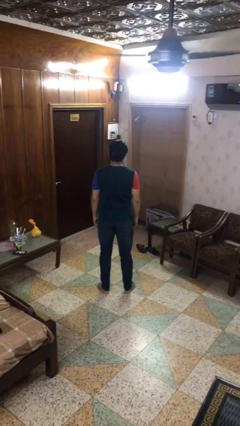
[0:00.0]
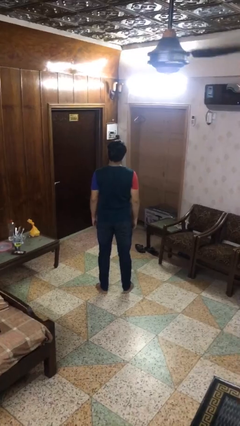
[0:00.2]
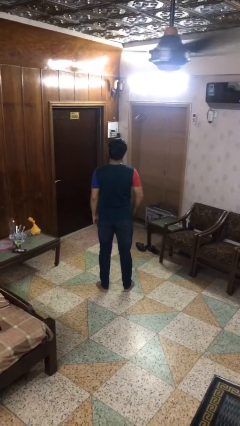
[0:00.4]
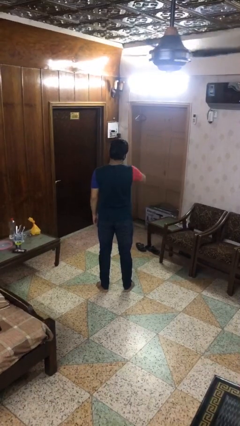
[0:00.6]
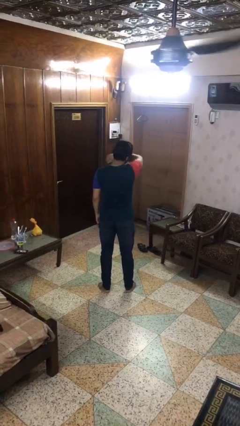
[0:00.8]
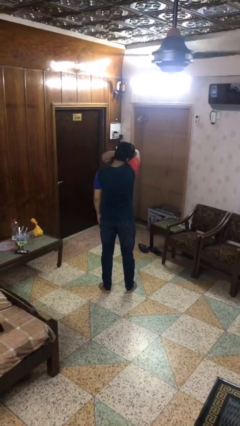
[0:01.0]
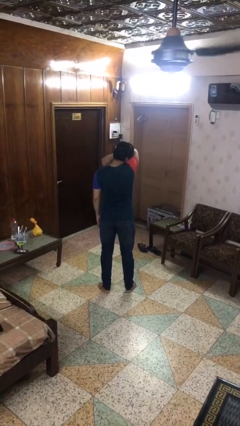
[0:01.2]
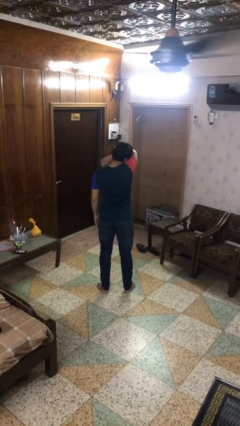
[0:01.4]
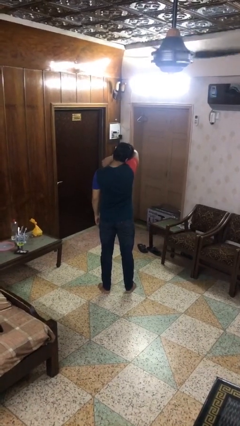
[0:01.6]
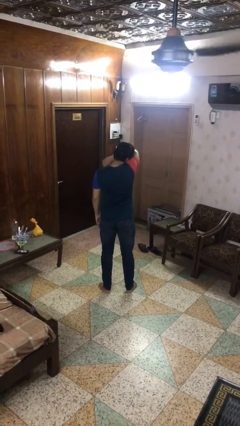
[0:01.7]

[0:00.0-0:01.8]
person sneezes into arm

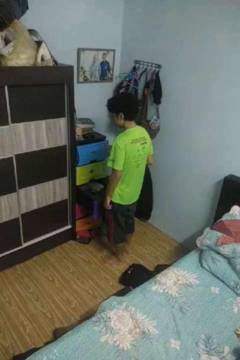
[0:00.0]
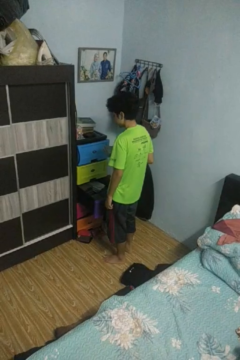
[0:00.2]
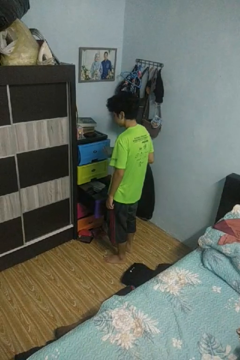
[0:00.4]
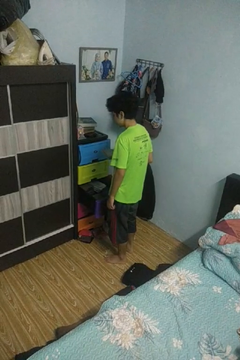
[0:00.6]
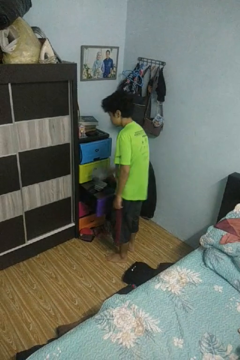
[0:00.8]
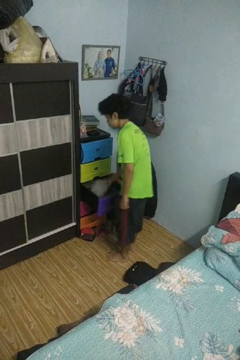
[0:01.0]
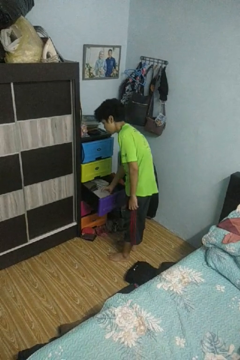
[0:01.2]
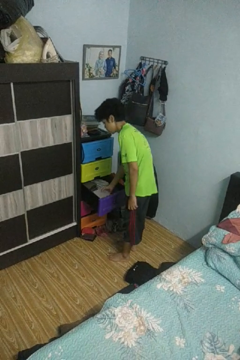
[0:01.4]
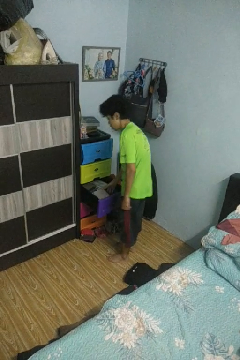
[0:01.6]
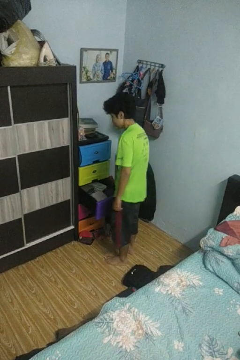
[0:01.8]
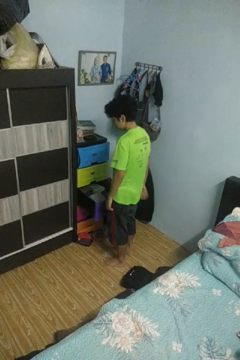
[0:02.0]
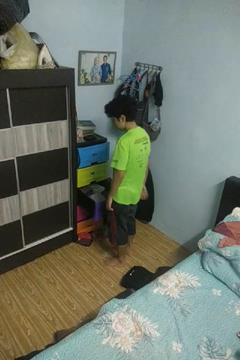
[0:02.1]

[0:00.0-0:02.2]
person puts clothes into dresser

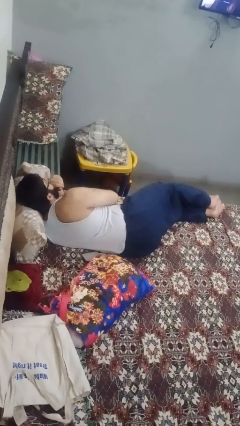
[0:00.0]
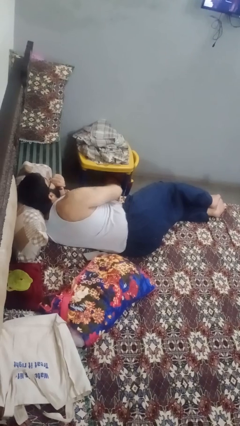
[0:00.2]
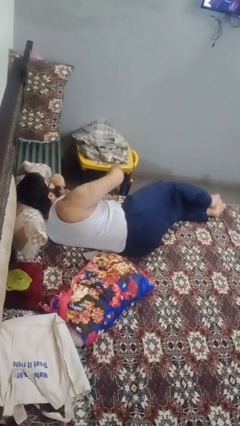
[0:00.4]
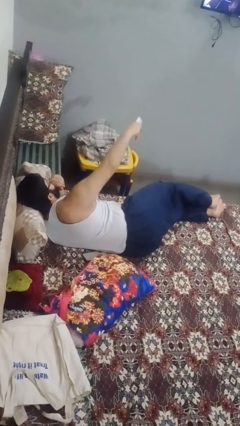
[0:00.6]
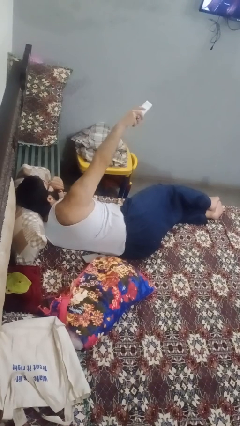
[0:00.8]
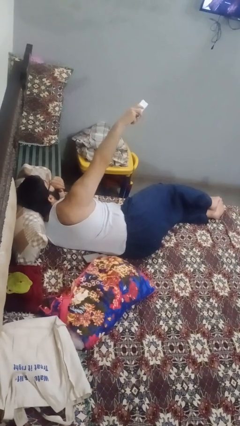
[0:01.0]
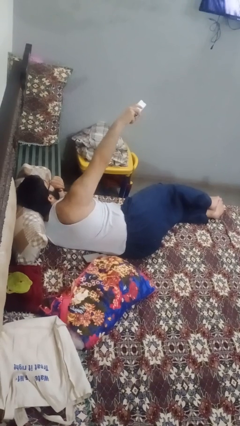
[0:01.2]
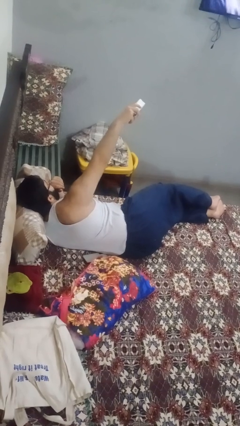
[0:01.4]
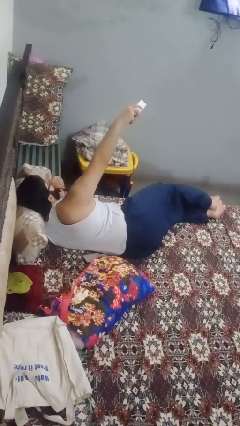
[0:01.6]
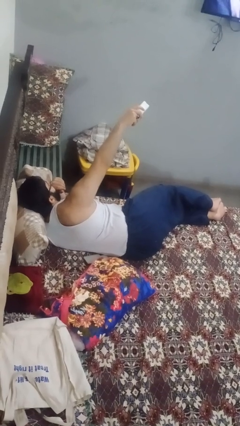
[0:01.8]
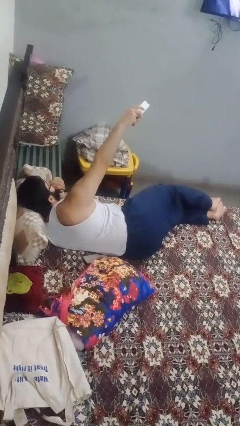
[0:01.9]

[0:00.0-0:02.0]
person uses television remote

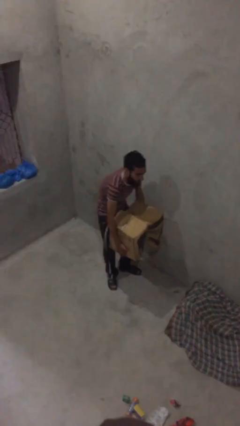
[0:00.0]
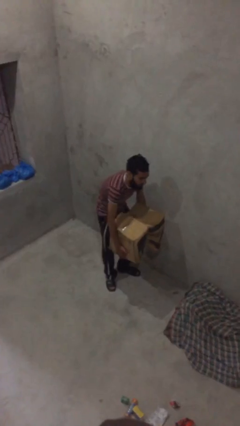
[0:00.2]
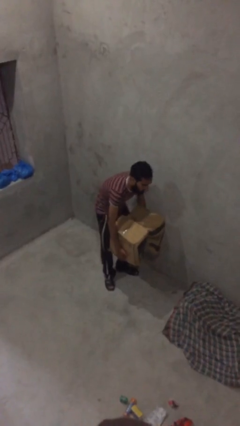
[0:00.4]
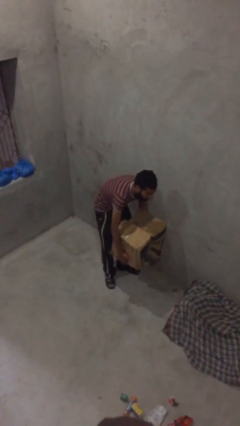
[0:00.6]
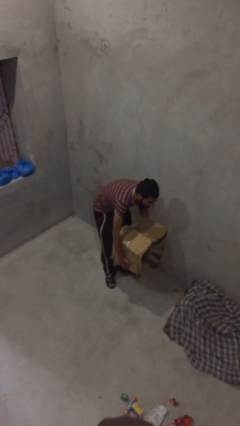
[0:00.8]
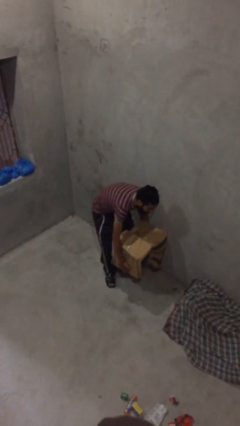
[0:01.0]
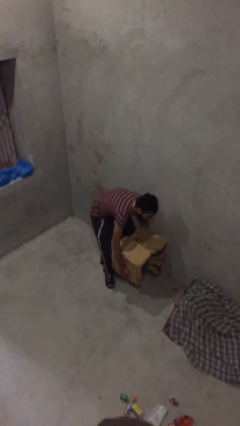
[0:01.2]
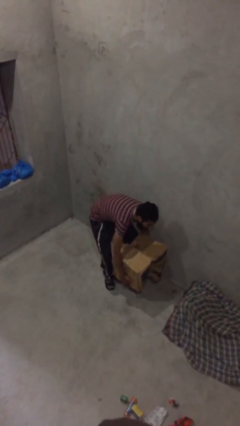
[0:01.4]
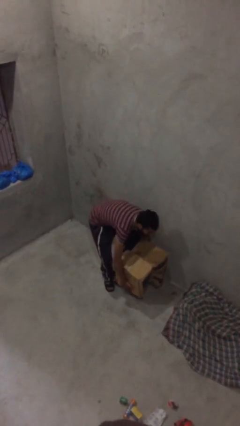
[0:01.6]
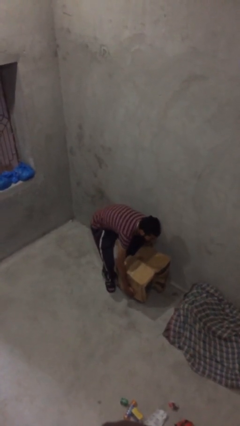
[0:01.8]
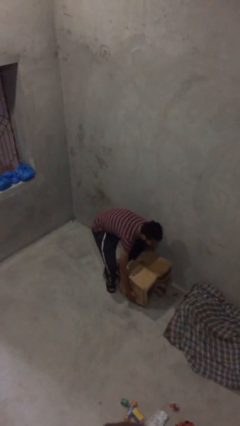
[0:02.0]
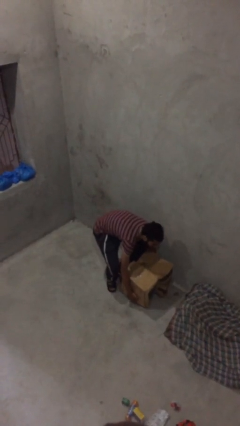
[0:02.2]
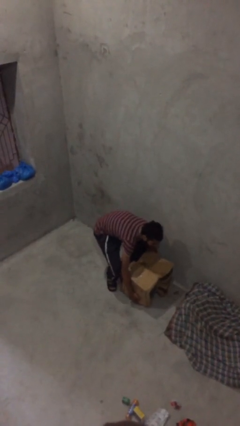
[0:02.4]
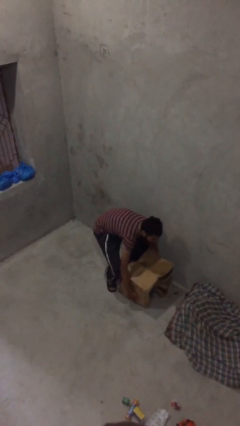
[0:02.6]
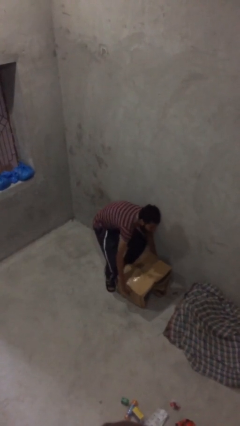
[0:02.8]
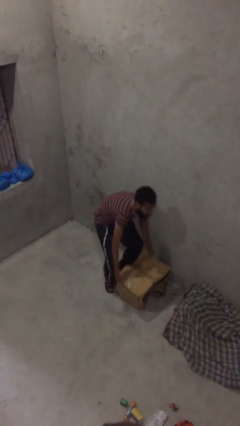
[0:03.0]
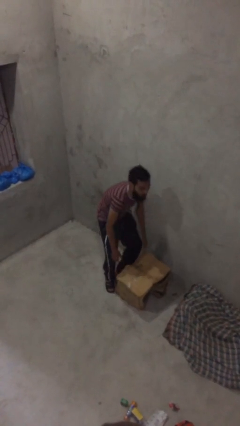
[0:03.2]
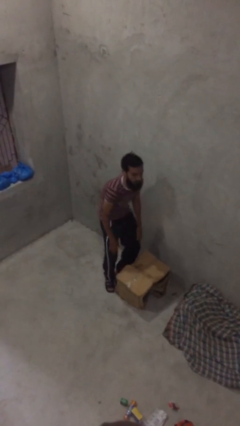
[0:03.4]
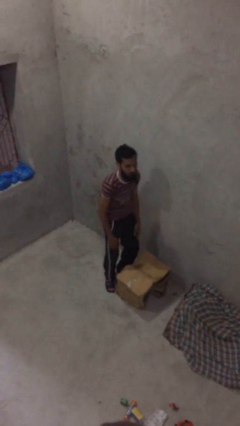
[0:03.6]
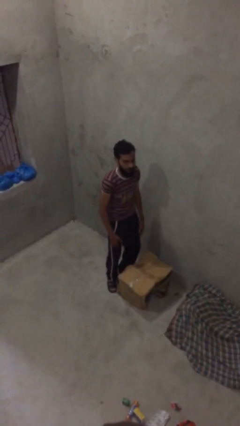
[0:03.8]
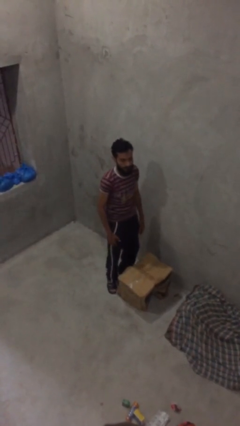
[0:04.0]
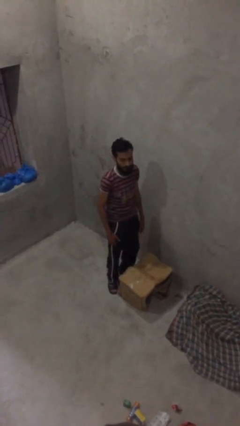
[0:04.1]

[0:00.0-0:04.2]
person puts down object on floor

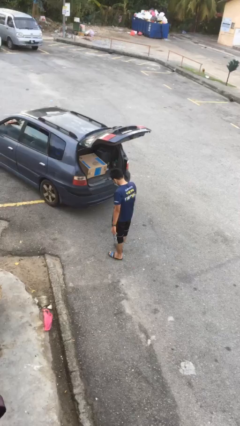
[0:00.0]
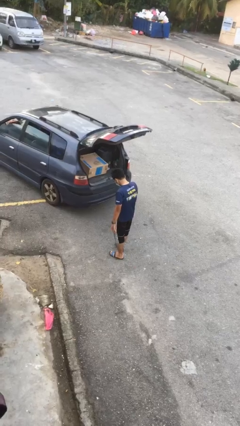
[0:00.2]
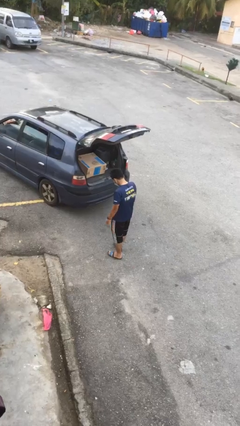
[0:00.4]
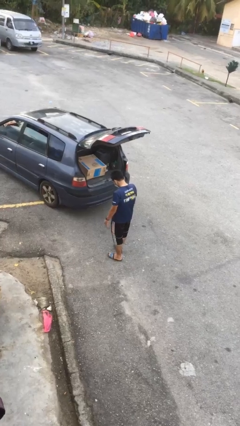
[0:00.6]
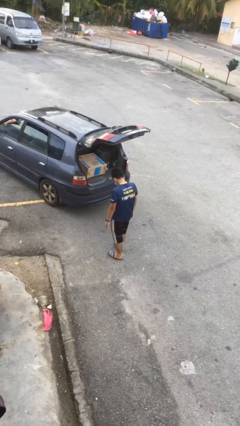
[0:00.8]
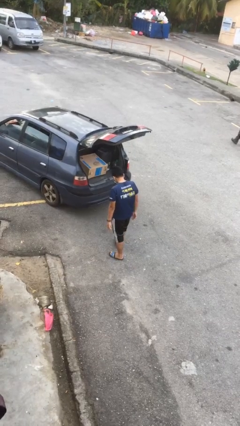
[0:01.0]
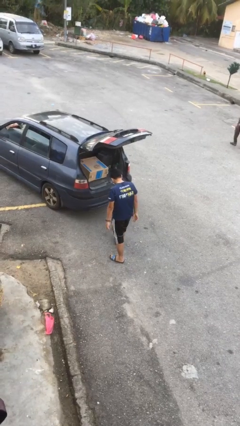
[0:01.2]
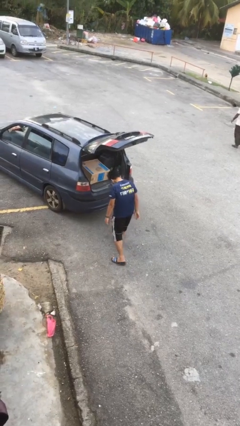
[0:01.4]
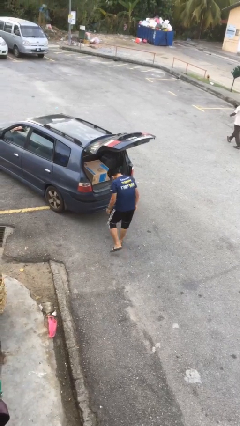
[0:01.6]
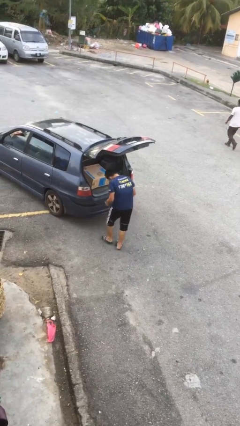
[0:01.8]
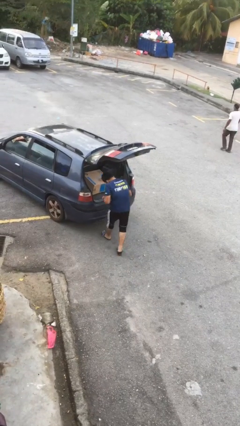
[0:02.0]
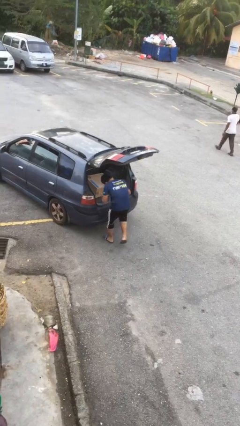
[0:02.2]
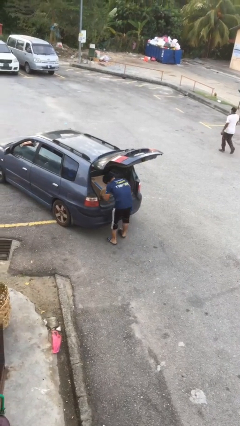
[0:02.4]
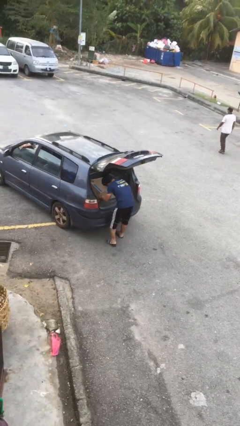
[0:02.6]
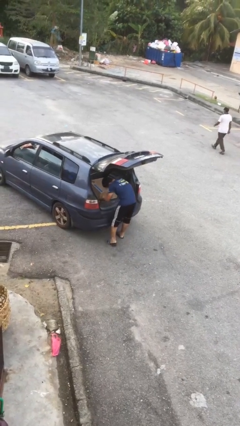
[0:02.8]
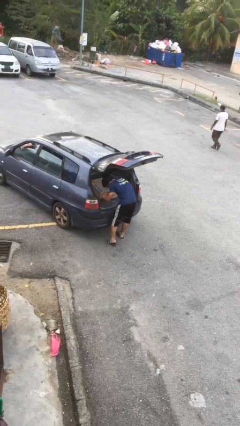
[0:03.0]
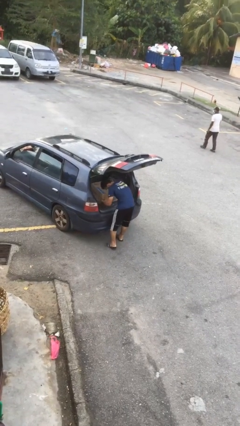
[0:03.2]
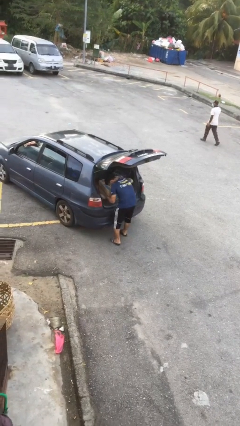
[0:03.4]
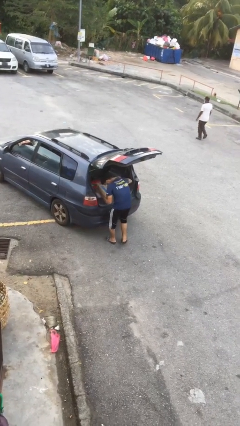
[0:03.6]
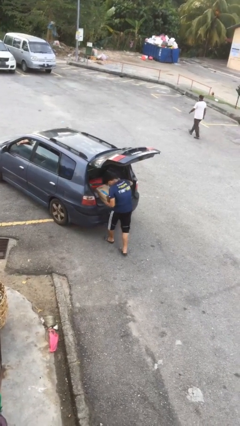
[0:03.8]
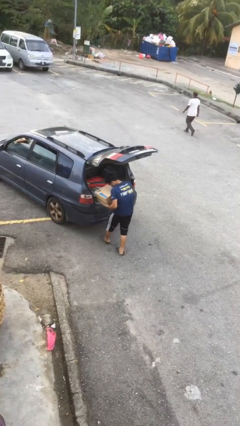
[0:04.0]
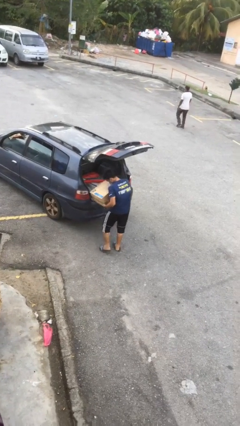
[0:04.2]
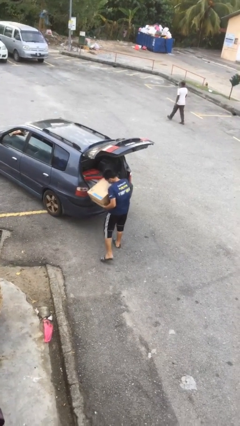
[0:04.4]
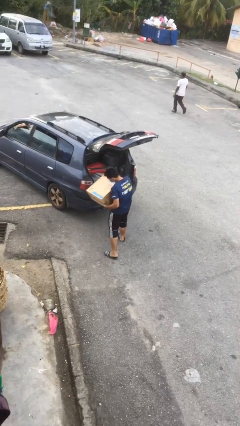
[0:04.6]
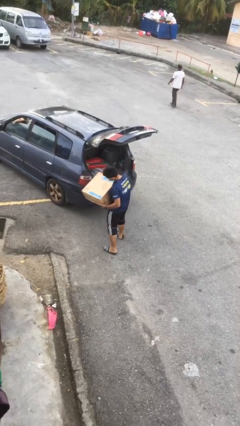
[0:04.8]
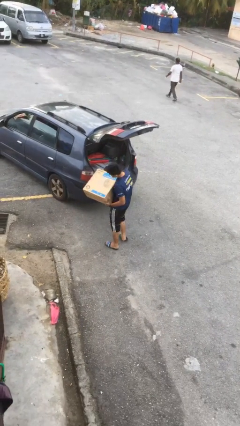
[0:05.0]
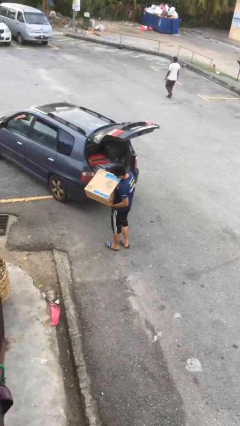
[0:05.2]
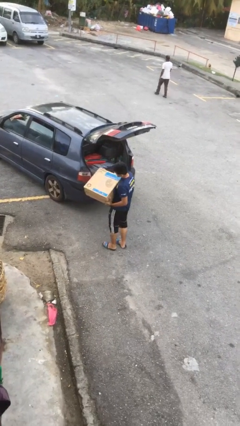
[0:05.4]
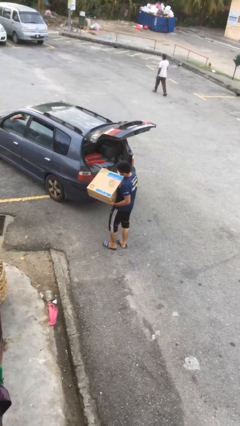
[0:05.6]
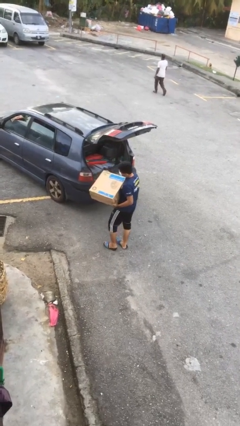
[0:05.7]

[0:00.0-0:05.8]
person unloads car

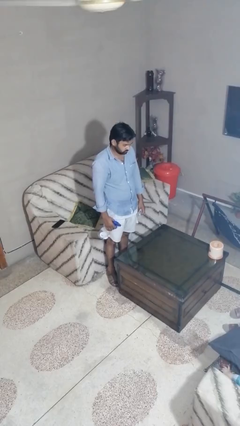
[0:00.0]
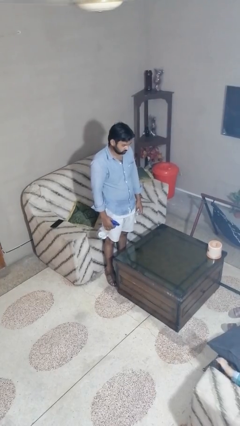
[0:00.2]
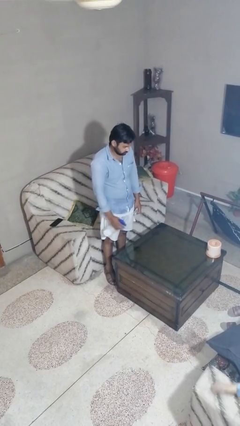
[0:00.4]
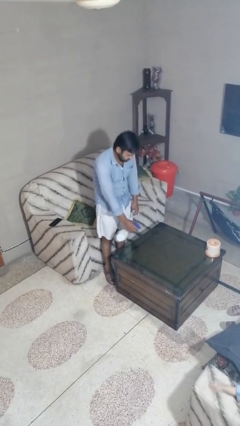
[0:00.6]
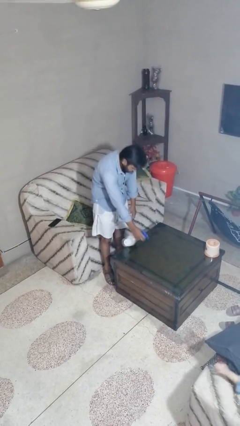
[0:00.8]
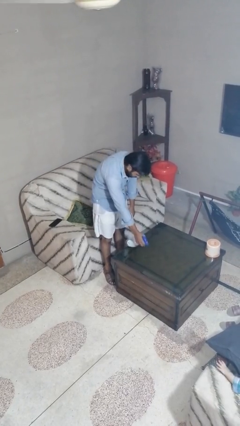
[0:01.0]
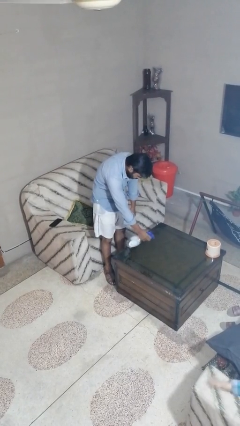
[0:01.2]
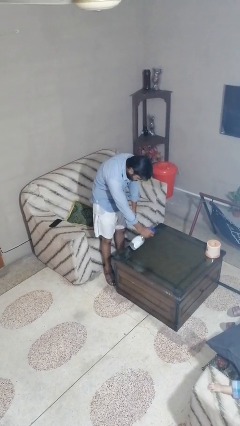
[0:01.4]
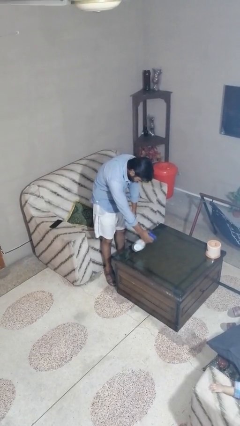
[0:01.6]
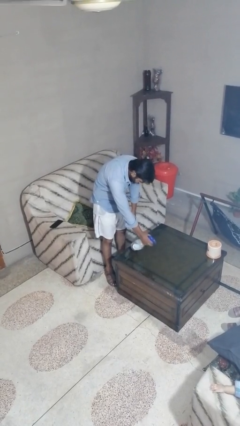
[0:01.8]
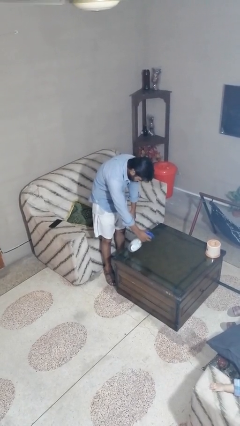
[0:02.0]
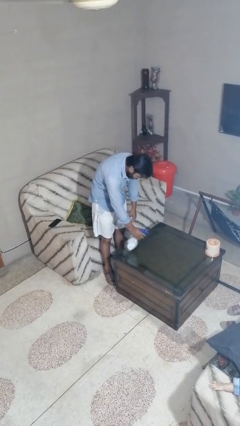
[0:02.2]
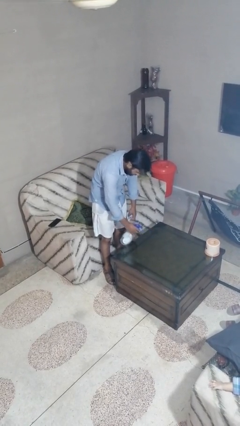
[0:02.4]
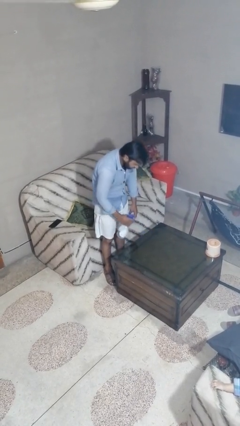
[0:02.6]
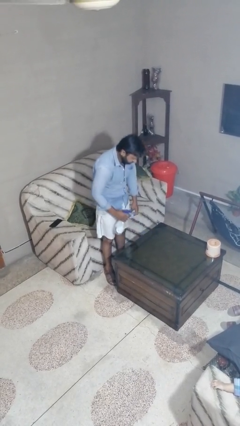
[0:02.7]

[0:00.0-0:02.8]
person sprays from bottle
